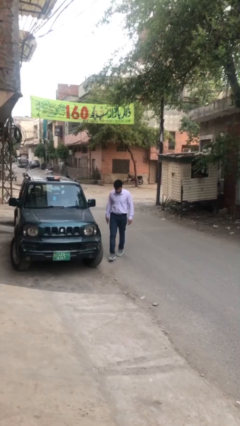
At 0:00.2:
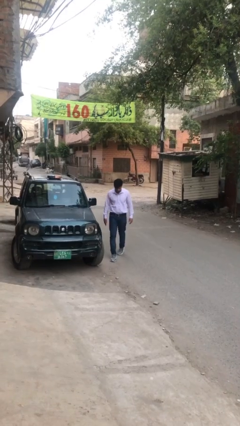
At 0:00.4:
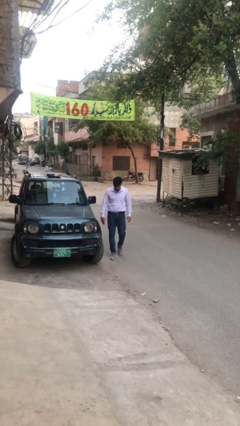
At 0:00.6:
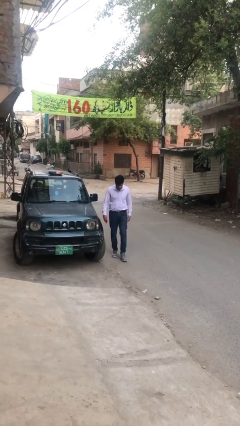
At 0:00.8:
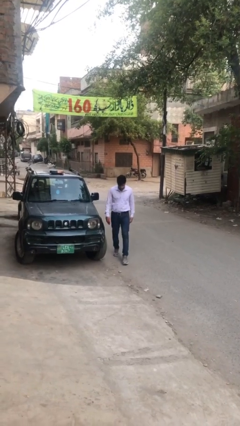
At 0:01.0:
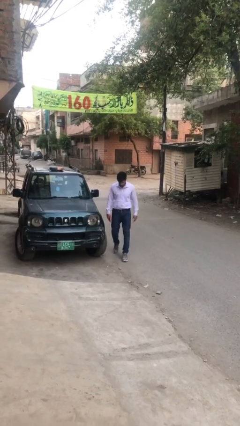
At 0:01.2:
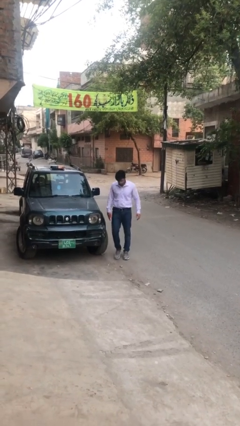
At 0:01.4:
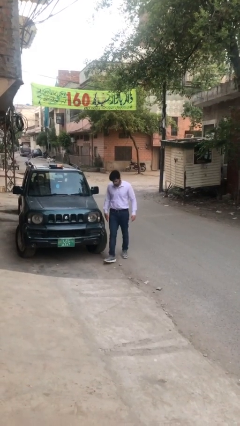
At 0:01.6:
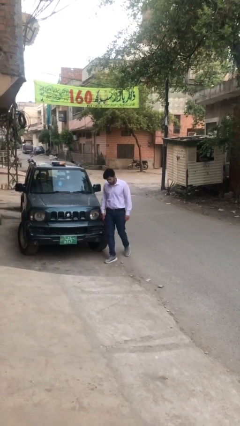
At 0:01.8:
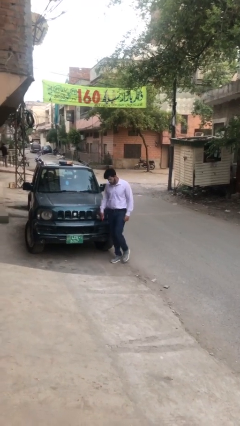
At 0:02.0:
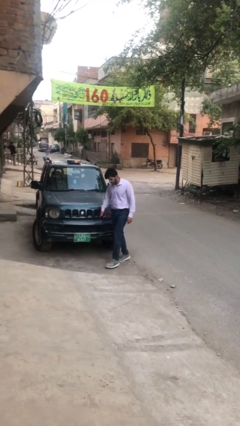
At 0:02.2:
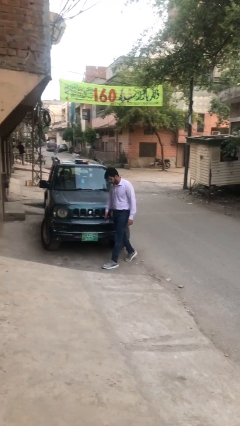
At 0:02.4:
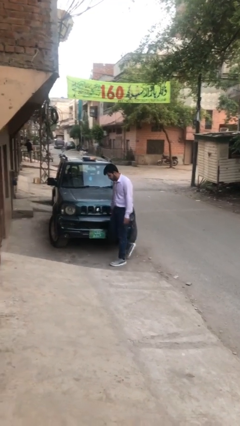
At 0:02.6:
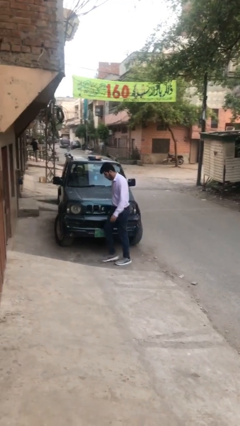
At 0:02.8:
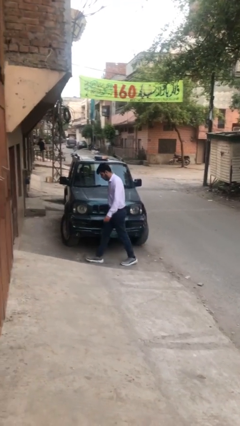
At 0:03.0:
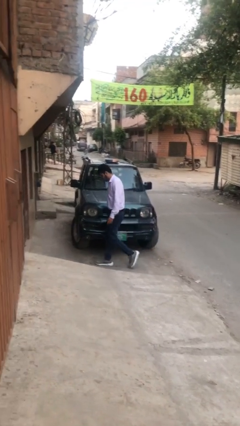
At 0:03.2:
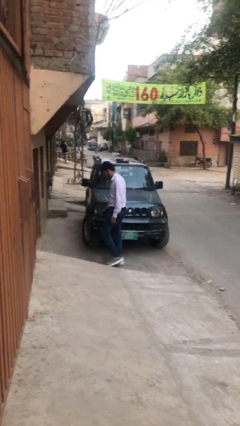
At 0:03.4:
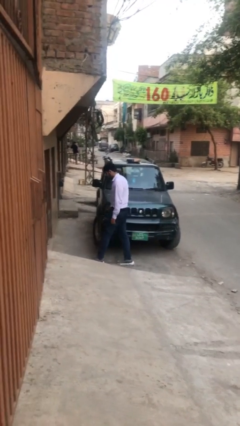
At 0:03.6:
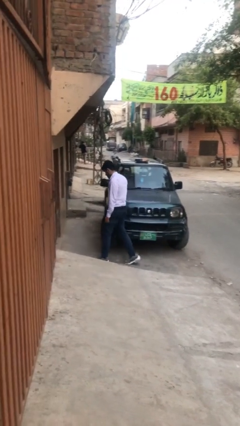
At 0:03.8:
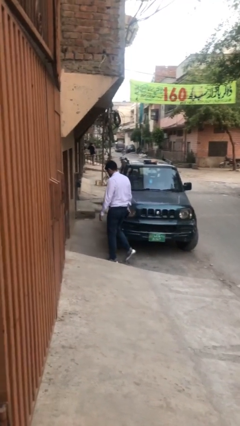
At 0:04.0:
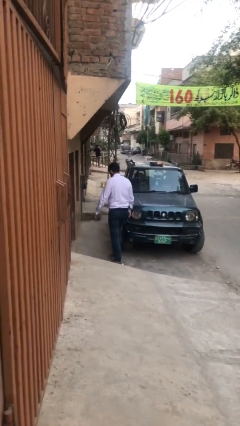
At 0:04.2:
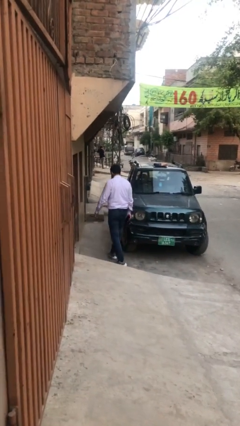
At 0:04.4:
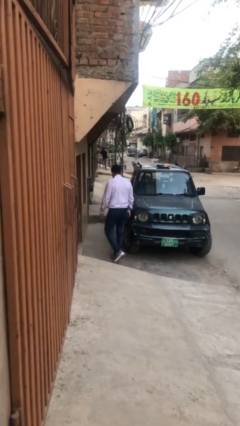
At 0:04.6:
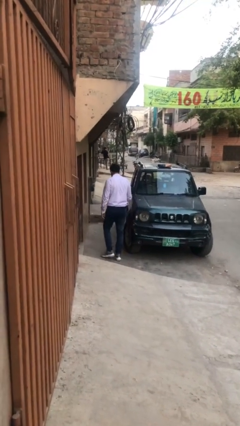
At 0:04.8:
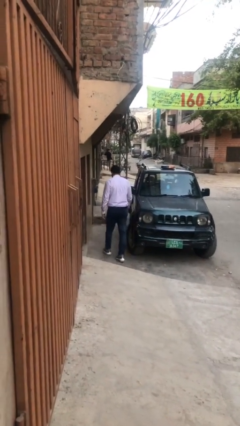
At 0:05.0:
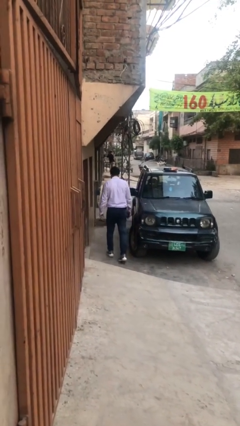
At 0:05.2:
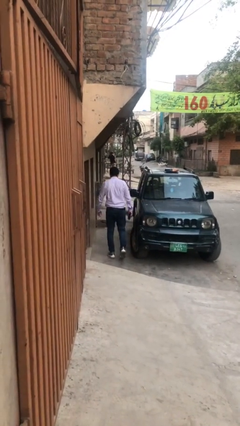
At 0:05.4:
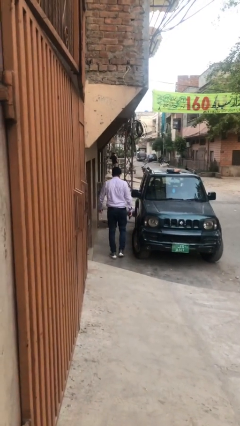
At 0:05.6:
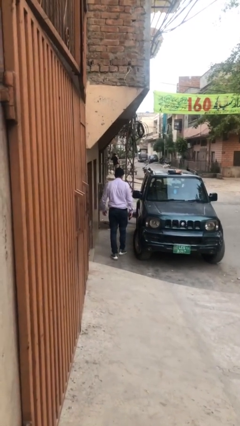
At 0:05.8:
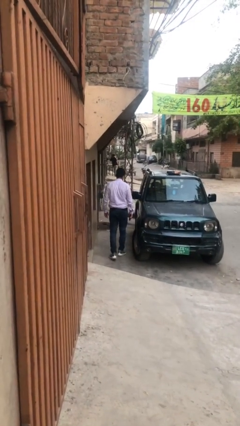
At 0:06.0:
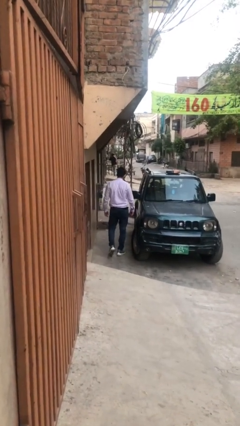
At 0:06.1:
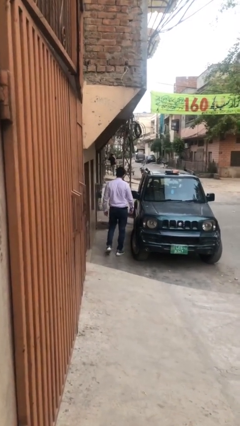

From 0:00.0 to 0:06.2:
person walks around car

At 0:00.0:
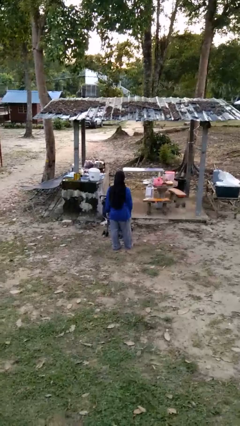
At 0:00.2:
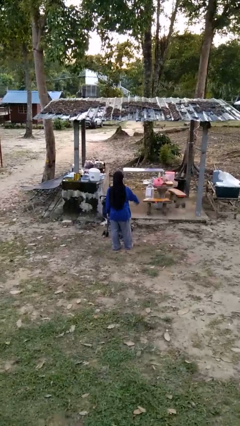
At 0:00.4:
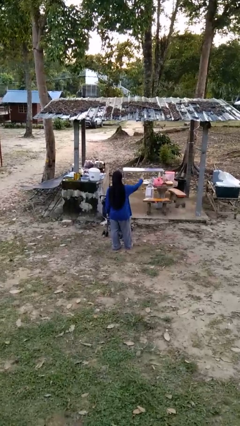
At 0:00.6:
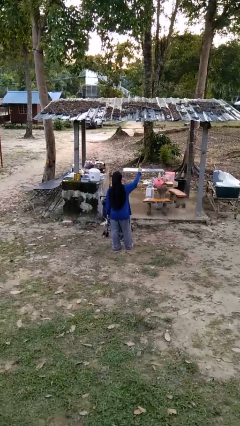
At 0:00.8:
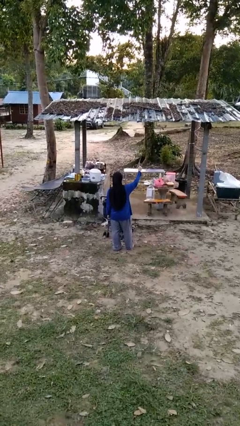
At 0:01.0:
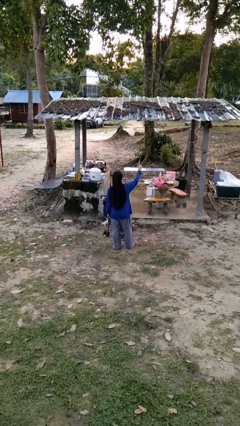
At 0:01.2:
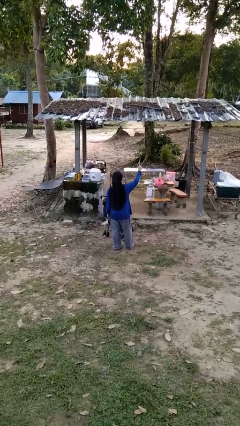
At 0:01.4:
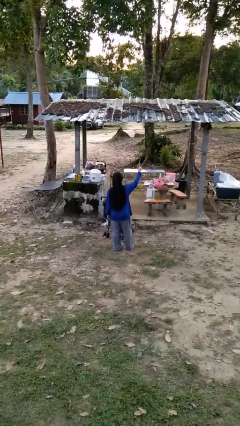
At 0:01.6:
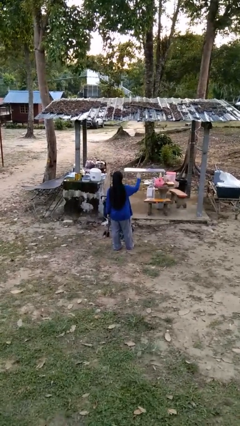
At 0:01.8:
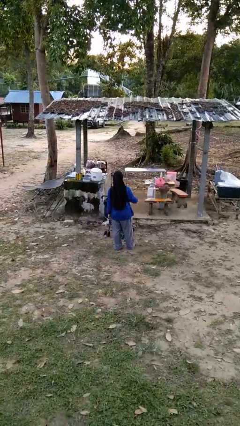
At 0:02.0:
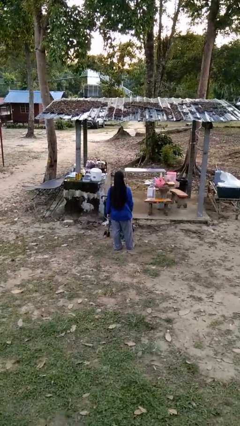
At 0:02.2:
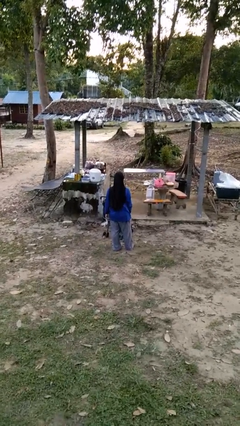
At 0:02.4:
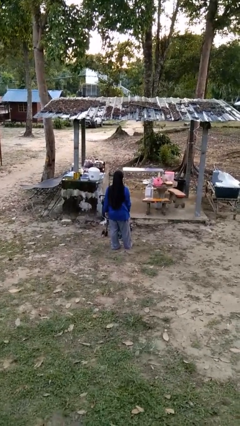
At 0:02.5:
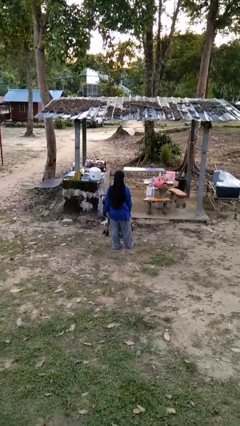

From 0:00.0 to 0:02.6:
person gestures number one

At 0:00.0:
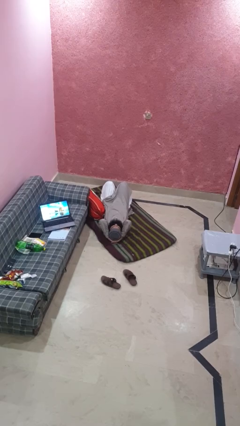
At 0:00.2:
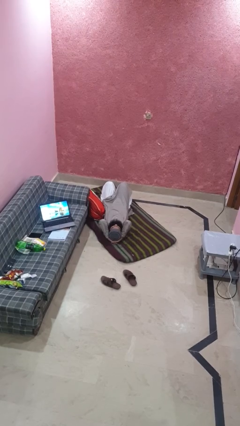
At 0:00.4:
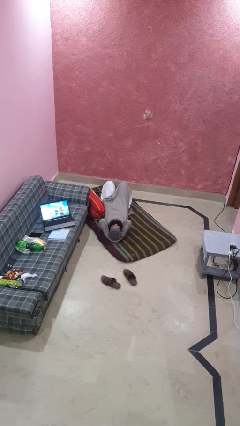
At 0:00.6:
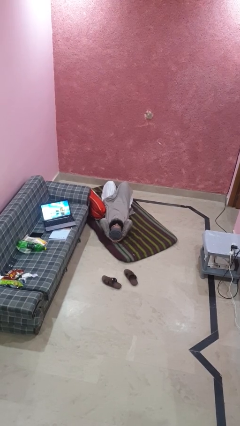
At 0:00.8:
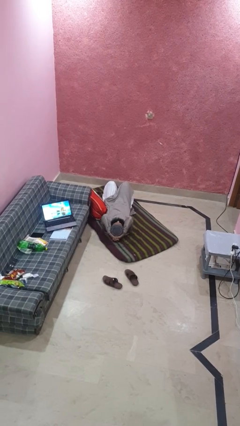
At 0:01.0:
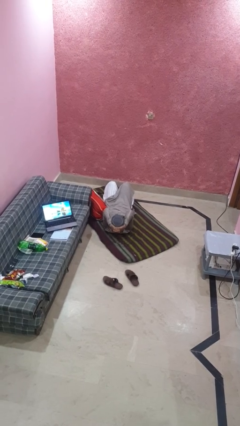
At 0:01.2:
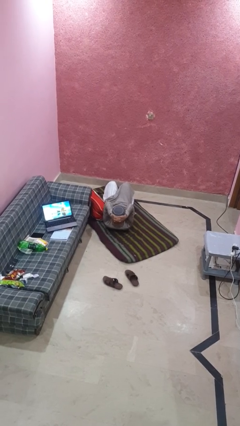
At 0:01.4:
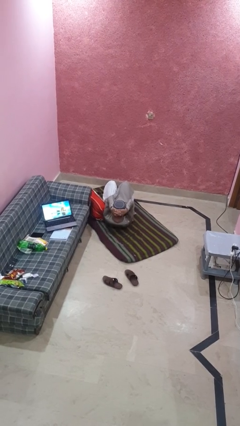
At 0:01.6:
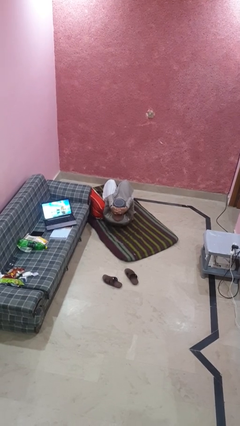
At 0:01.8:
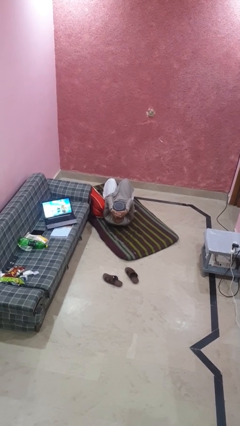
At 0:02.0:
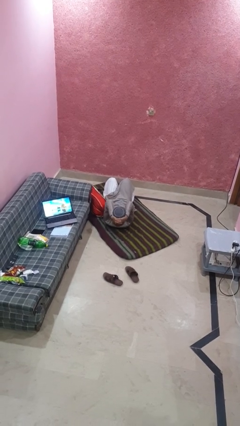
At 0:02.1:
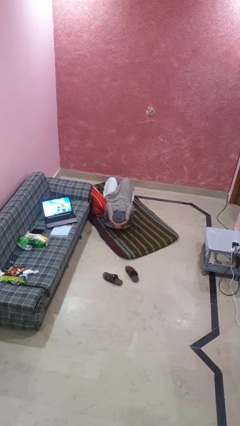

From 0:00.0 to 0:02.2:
person exercises with situp

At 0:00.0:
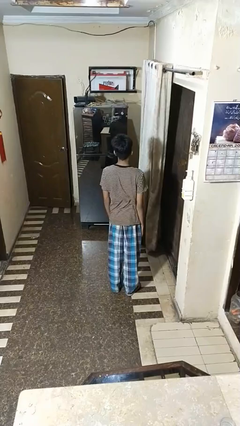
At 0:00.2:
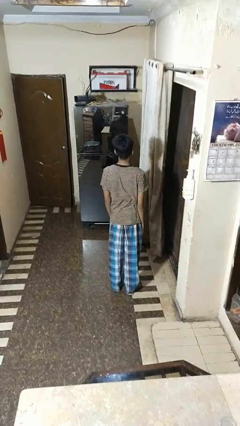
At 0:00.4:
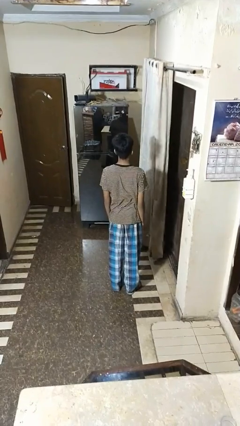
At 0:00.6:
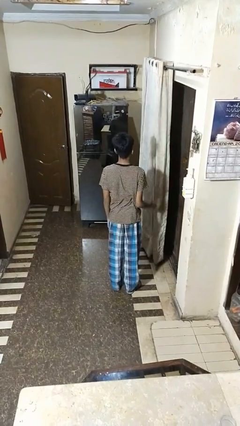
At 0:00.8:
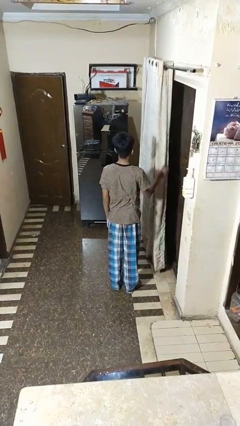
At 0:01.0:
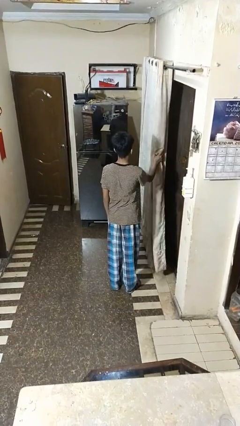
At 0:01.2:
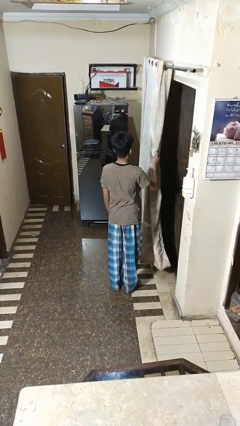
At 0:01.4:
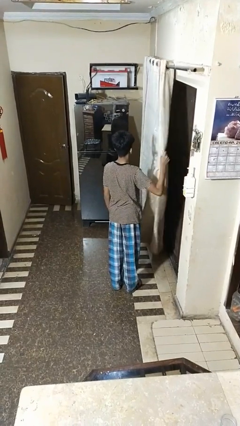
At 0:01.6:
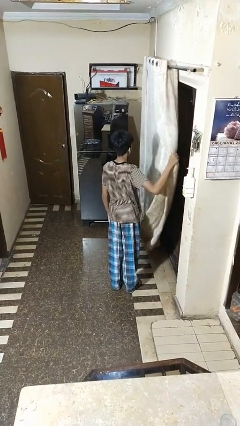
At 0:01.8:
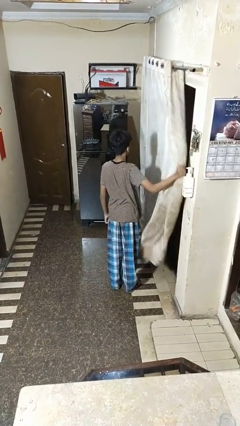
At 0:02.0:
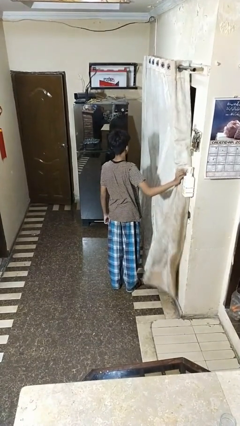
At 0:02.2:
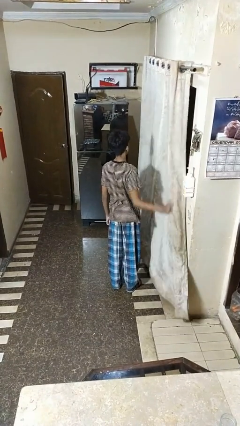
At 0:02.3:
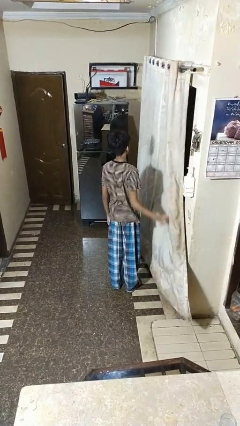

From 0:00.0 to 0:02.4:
person closes curtains

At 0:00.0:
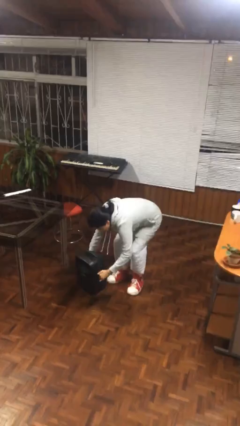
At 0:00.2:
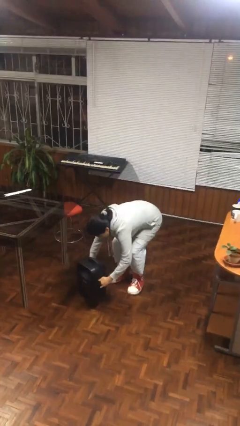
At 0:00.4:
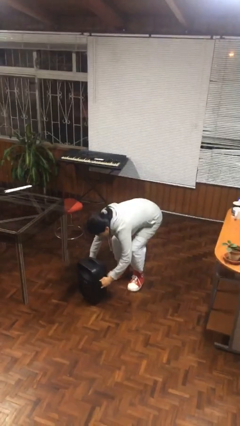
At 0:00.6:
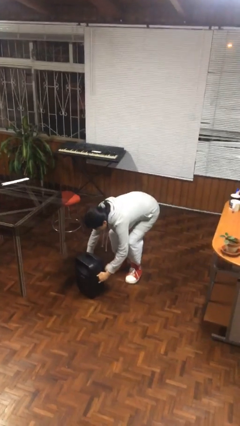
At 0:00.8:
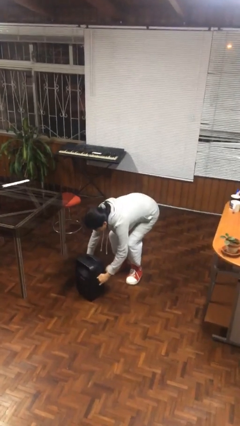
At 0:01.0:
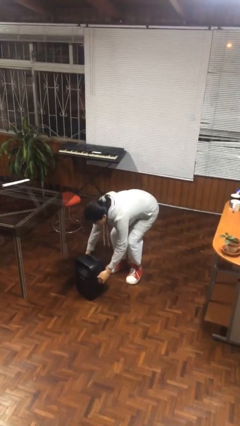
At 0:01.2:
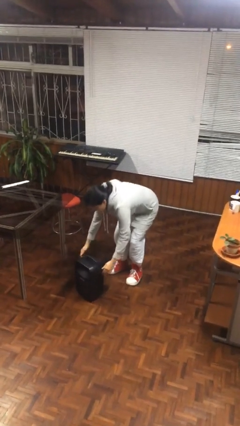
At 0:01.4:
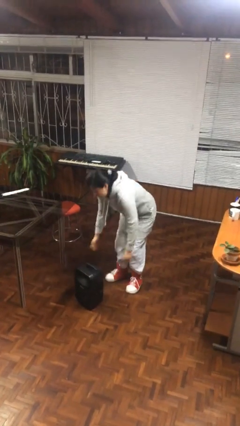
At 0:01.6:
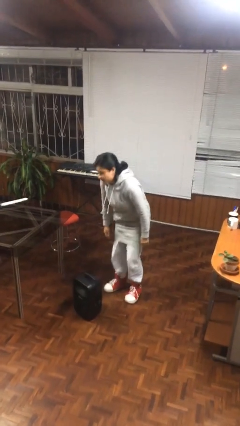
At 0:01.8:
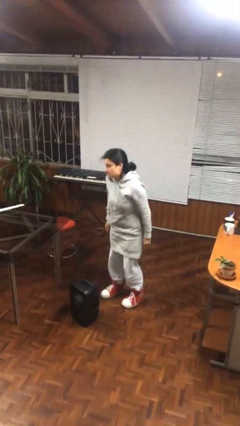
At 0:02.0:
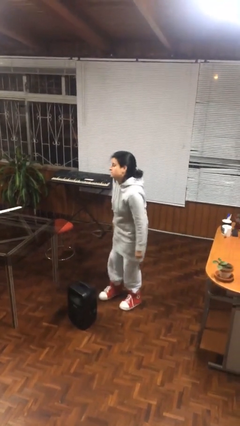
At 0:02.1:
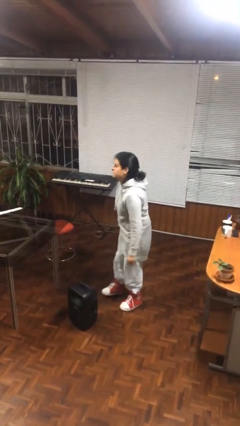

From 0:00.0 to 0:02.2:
person puts down object on floor

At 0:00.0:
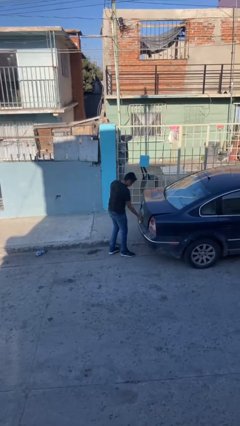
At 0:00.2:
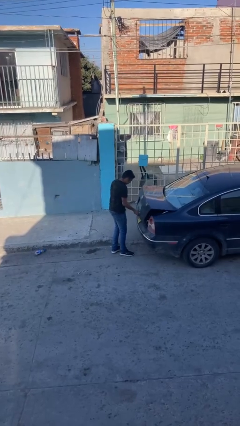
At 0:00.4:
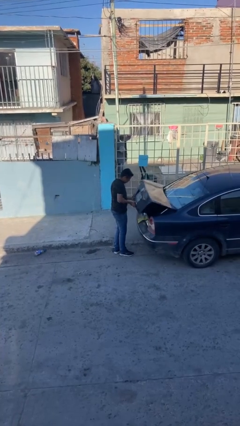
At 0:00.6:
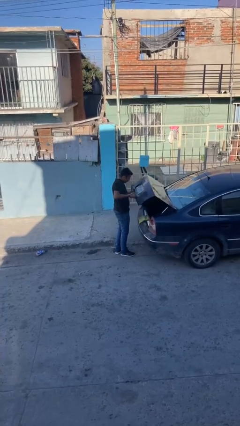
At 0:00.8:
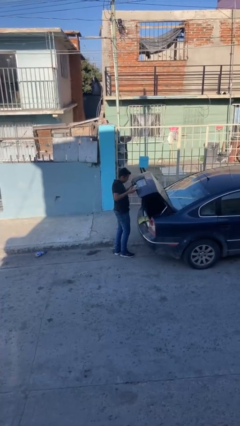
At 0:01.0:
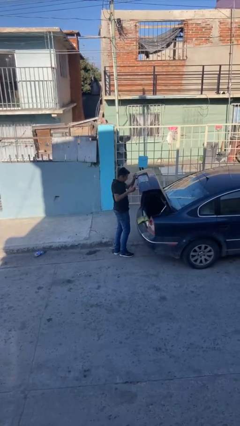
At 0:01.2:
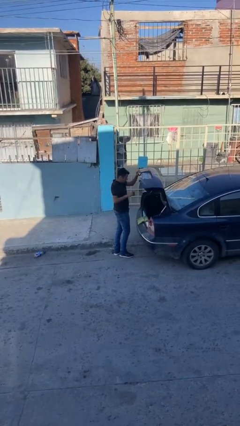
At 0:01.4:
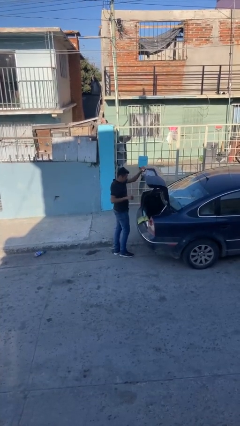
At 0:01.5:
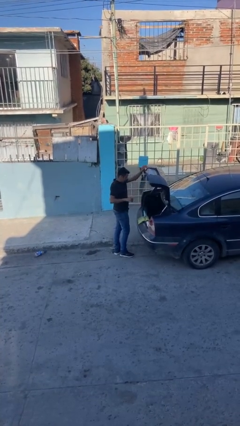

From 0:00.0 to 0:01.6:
person opens car trunk
